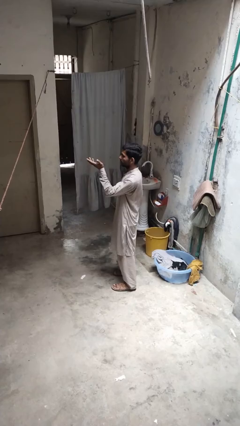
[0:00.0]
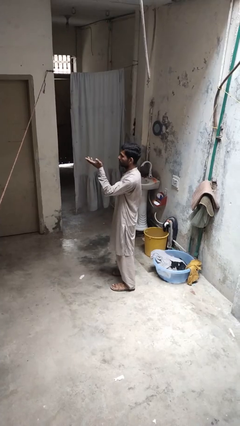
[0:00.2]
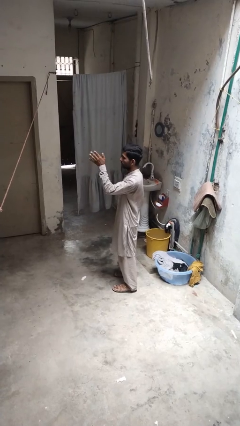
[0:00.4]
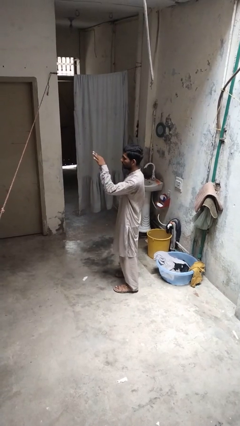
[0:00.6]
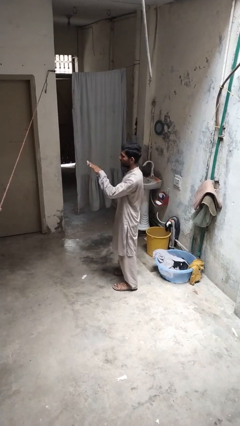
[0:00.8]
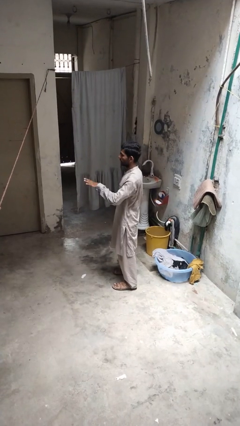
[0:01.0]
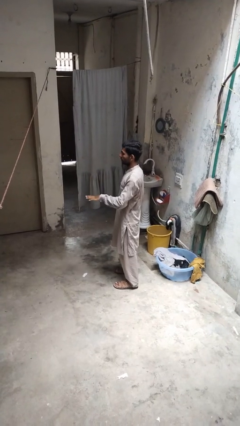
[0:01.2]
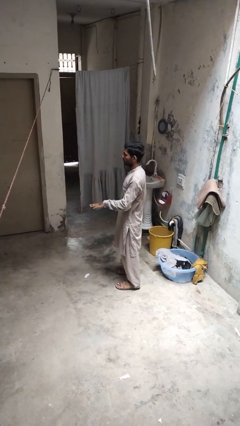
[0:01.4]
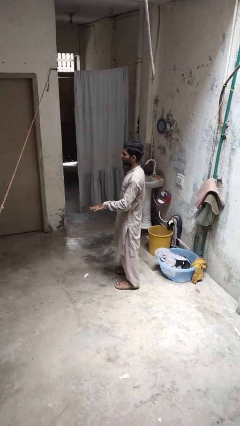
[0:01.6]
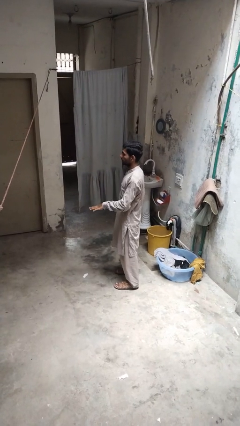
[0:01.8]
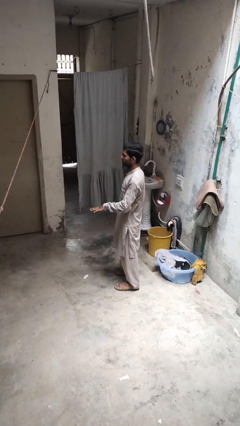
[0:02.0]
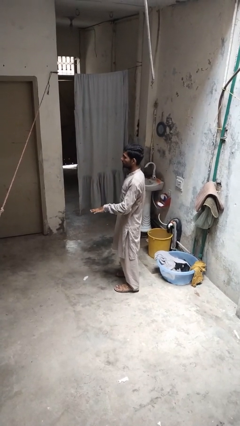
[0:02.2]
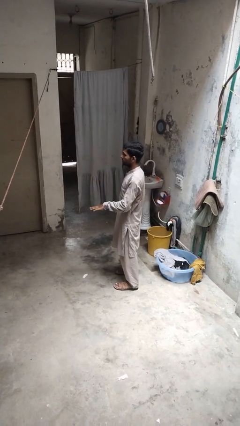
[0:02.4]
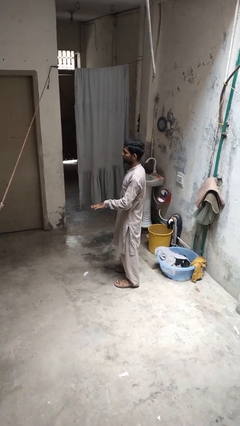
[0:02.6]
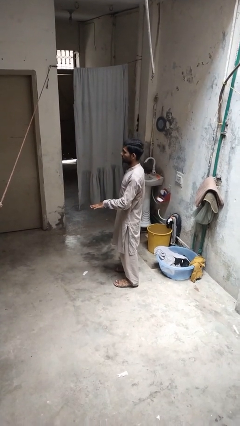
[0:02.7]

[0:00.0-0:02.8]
person gestures swipe down

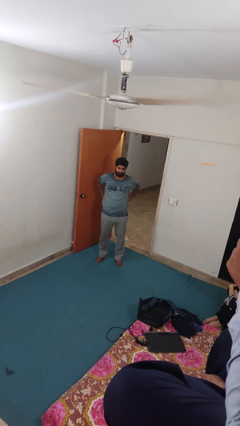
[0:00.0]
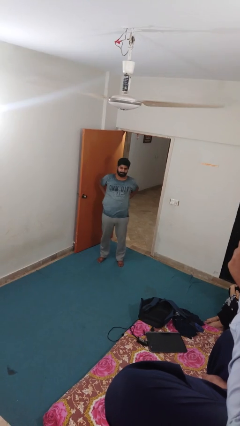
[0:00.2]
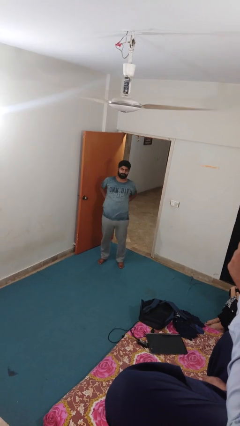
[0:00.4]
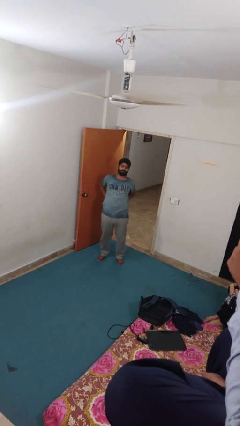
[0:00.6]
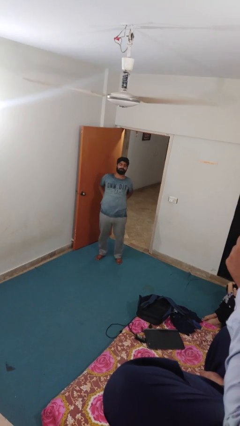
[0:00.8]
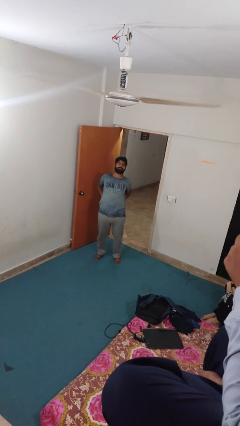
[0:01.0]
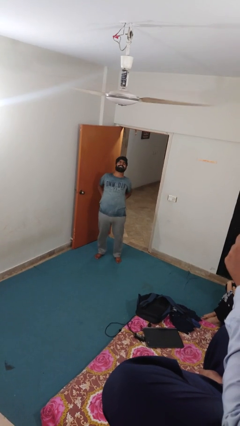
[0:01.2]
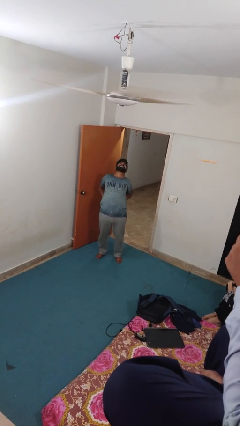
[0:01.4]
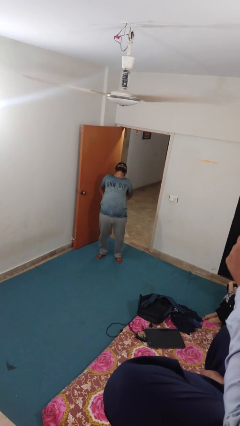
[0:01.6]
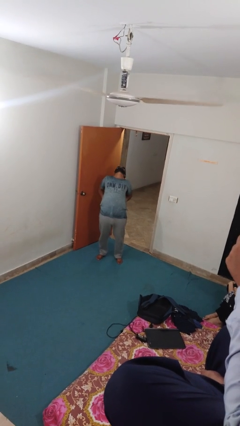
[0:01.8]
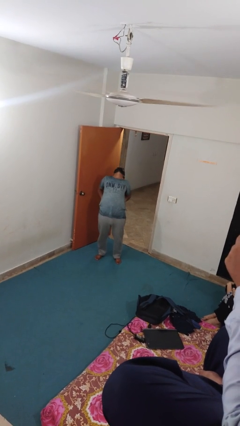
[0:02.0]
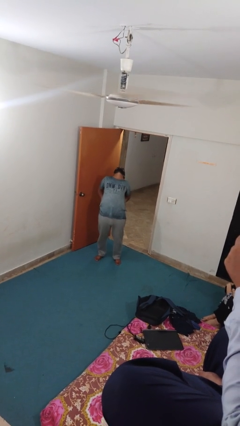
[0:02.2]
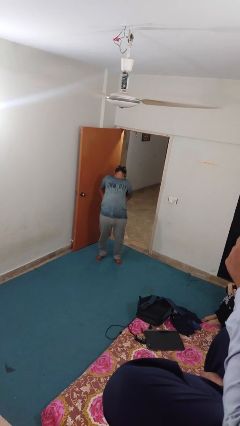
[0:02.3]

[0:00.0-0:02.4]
person stretches back

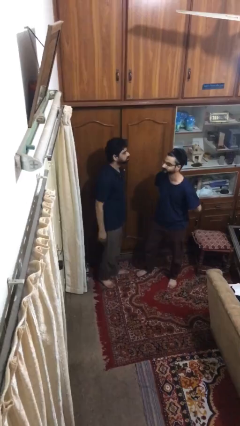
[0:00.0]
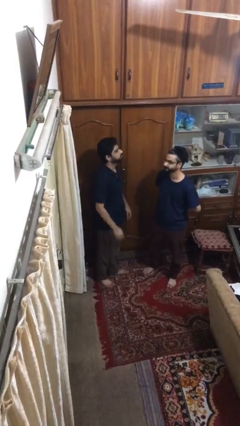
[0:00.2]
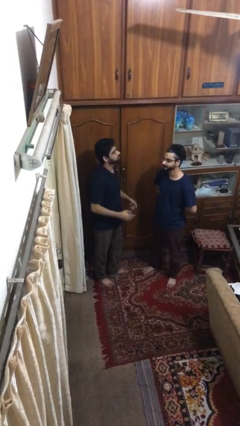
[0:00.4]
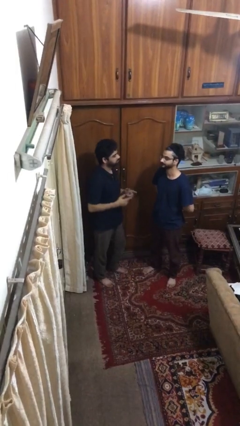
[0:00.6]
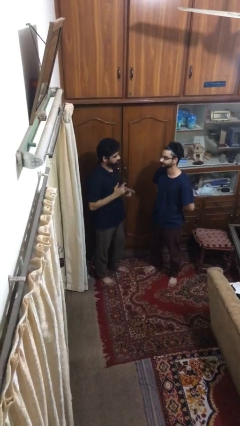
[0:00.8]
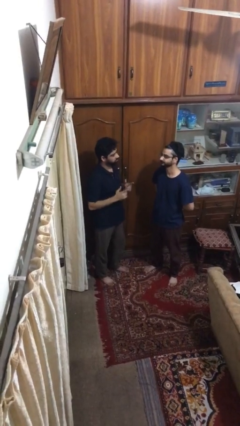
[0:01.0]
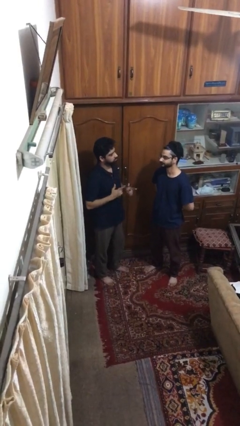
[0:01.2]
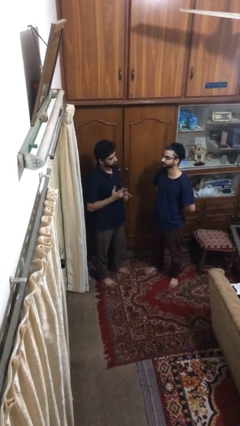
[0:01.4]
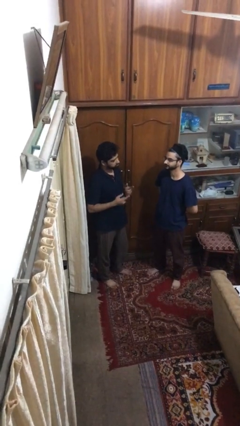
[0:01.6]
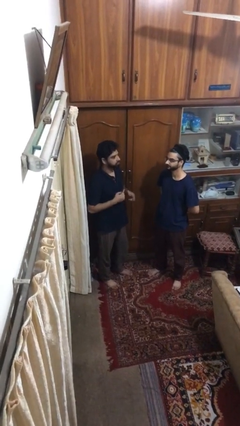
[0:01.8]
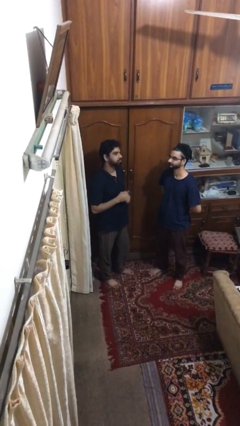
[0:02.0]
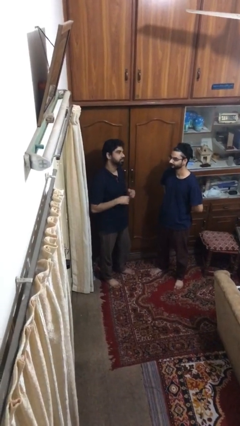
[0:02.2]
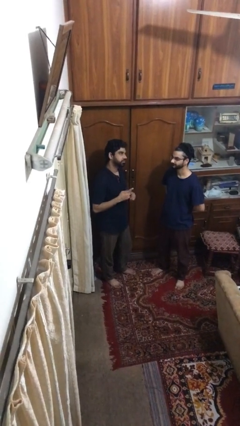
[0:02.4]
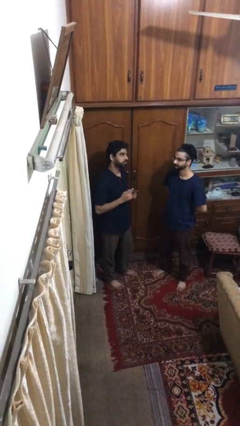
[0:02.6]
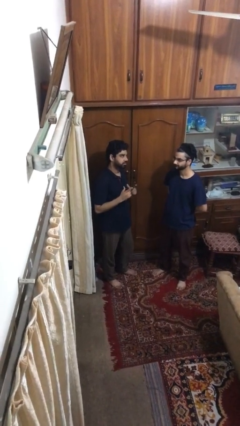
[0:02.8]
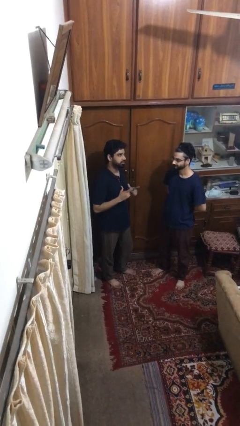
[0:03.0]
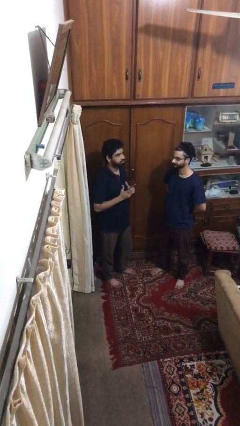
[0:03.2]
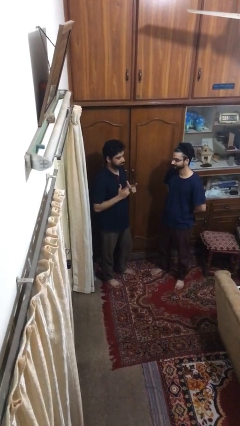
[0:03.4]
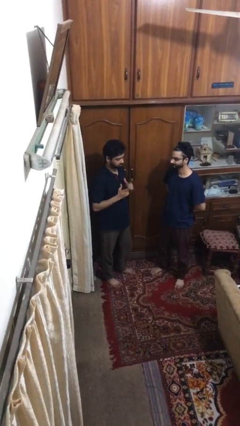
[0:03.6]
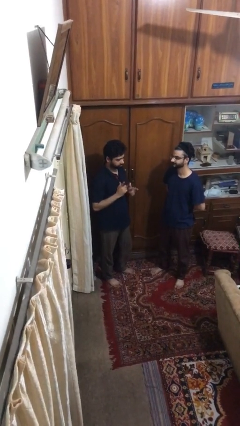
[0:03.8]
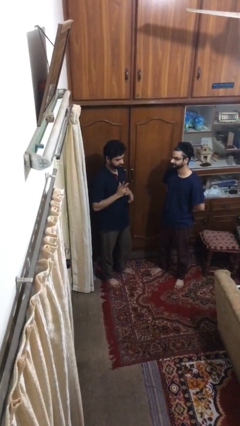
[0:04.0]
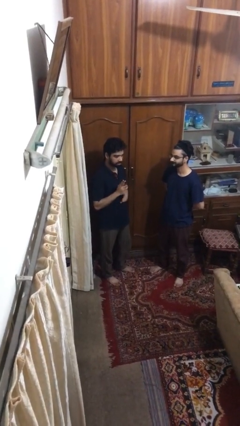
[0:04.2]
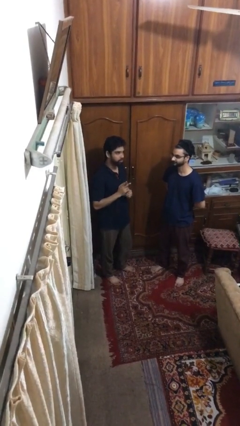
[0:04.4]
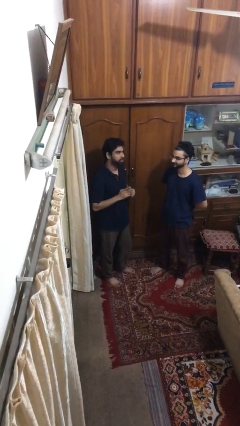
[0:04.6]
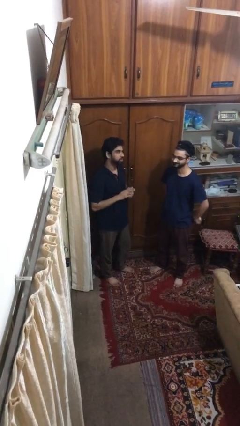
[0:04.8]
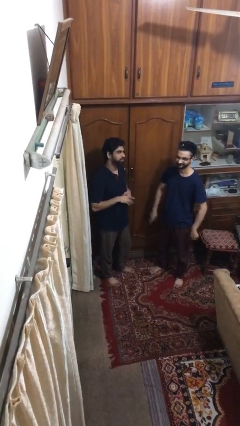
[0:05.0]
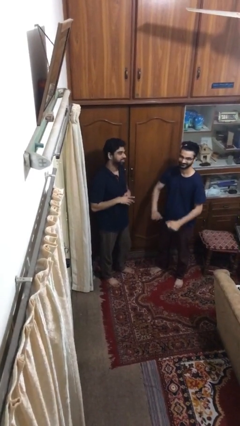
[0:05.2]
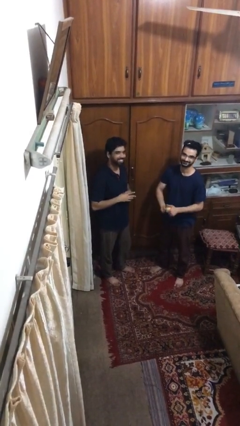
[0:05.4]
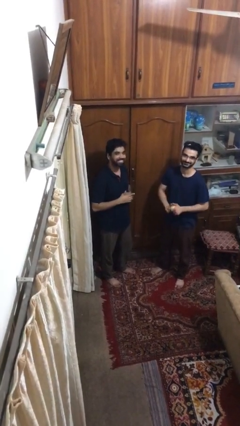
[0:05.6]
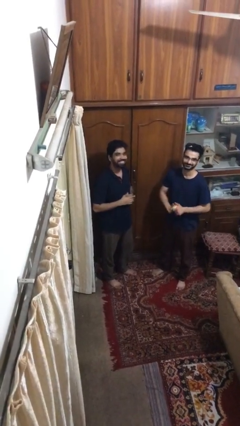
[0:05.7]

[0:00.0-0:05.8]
person talks to person

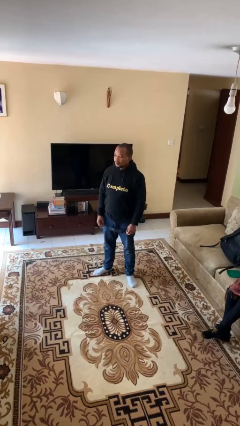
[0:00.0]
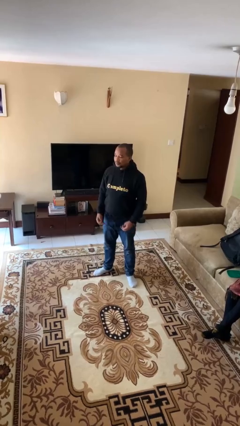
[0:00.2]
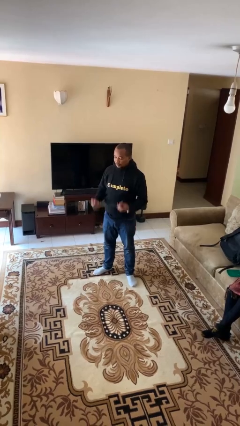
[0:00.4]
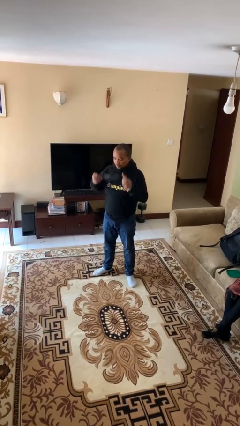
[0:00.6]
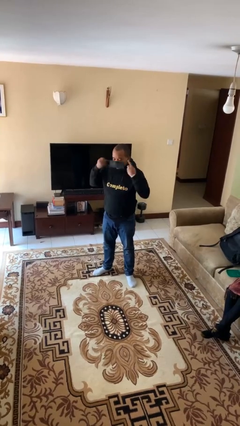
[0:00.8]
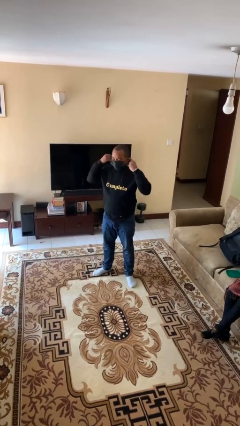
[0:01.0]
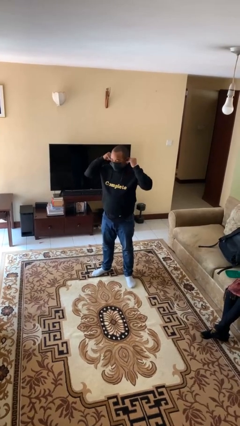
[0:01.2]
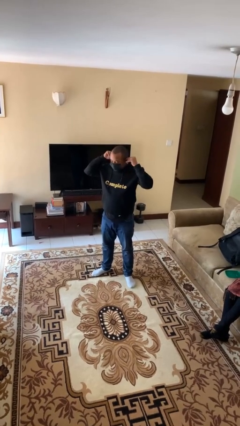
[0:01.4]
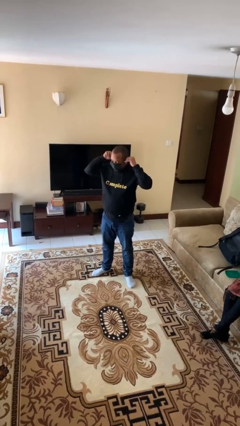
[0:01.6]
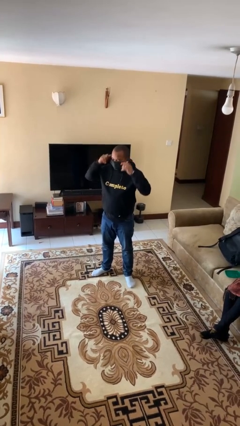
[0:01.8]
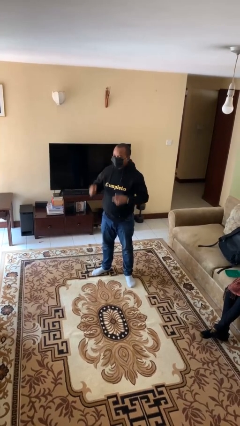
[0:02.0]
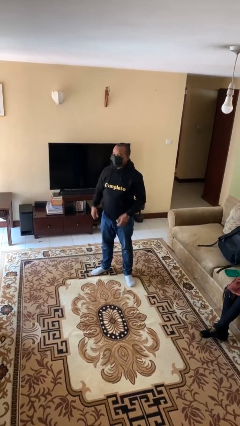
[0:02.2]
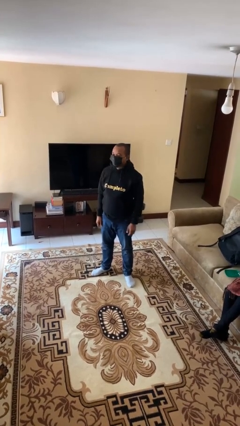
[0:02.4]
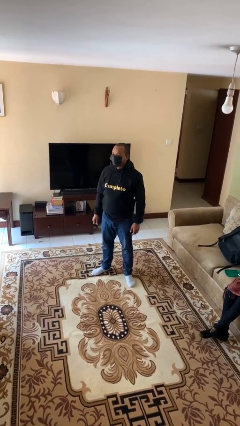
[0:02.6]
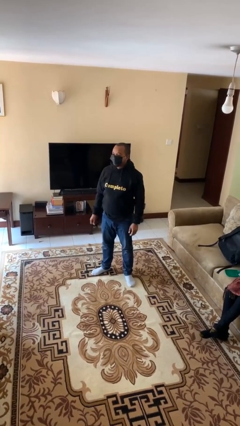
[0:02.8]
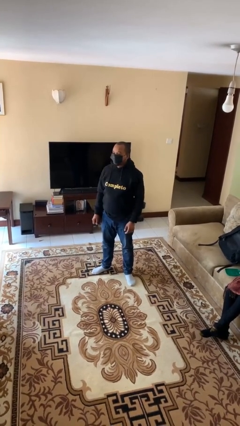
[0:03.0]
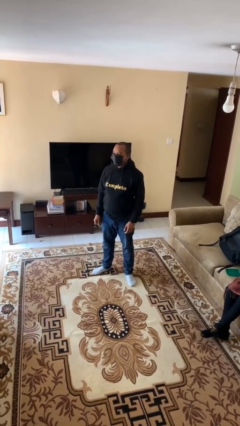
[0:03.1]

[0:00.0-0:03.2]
person puts on facemask

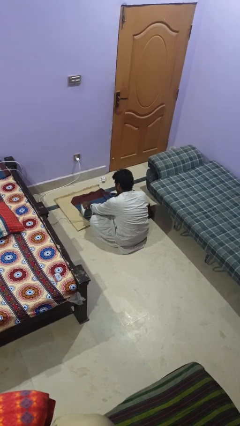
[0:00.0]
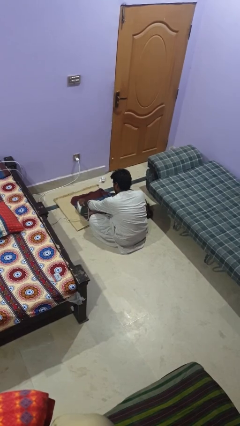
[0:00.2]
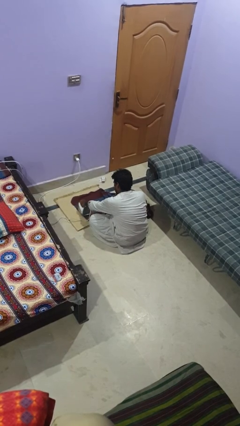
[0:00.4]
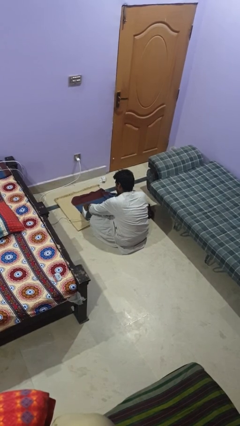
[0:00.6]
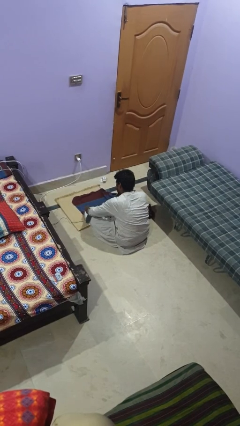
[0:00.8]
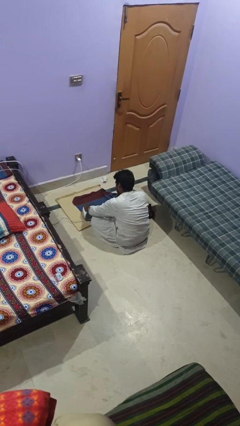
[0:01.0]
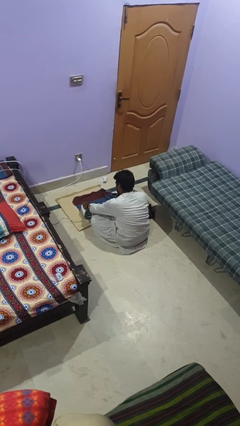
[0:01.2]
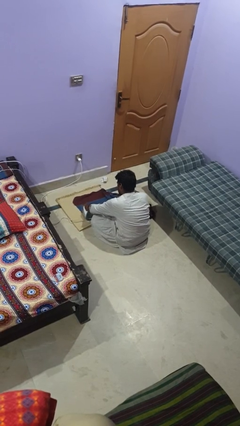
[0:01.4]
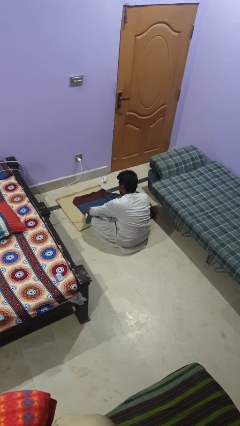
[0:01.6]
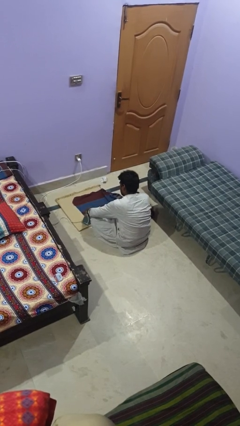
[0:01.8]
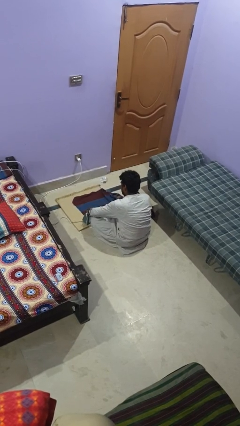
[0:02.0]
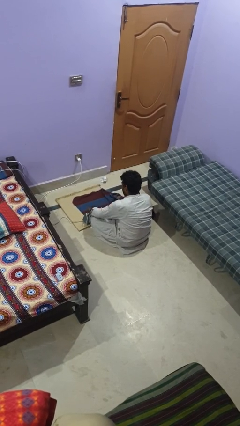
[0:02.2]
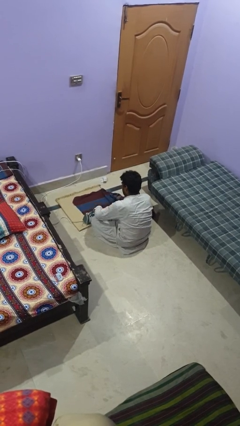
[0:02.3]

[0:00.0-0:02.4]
person irons clothes

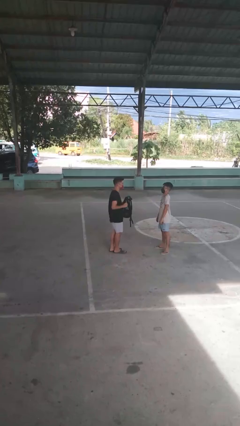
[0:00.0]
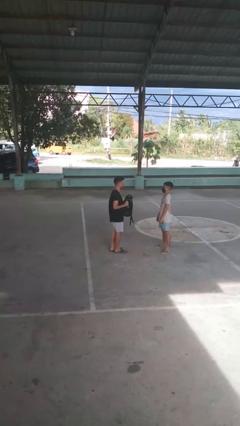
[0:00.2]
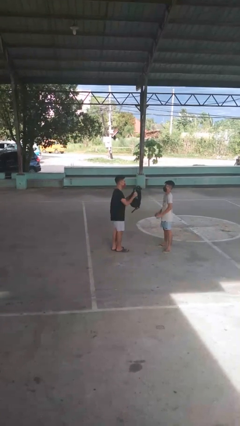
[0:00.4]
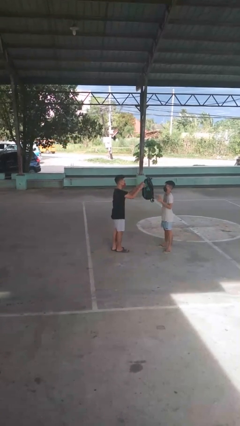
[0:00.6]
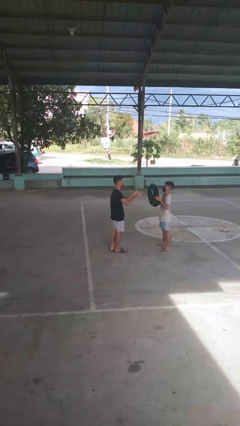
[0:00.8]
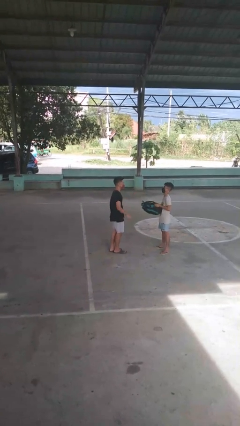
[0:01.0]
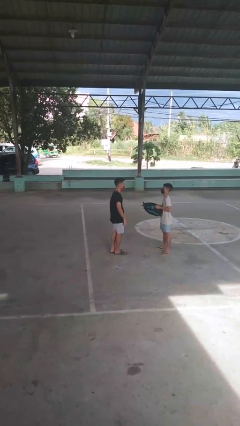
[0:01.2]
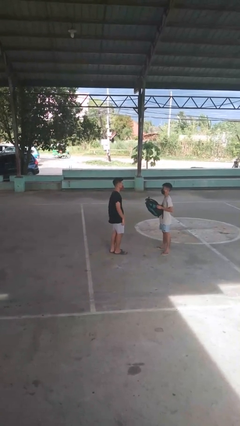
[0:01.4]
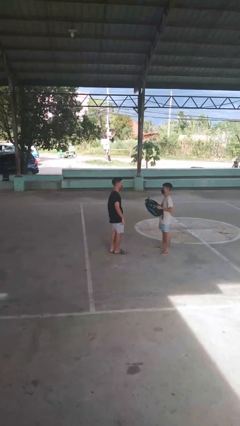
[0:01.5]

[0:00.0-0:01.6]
person throws object to person
